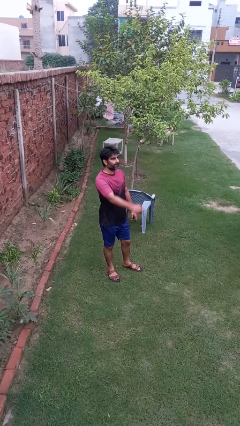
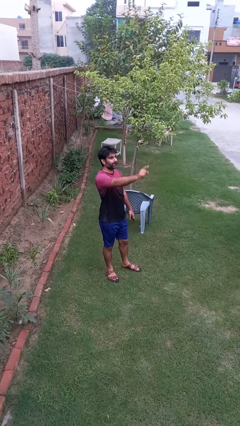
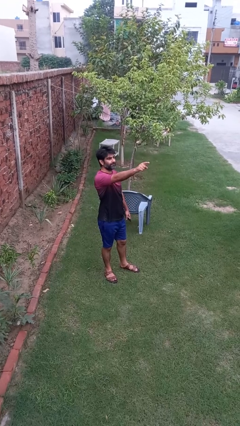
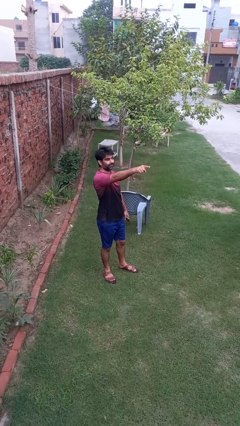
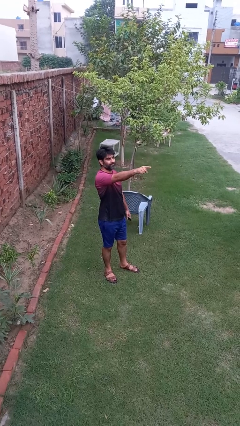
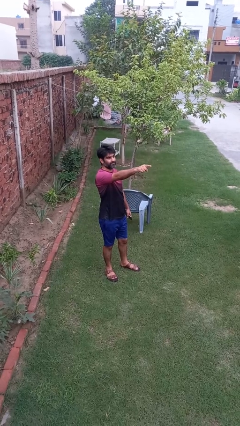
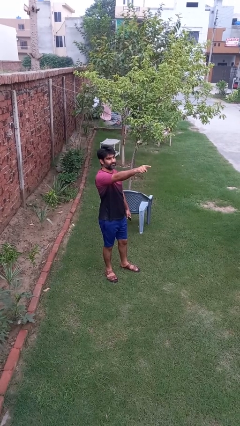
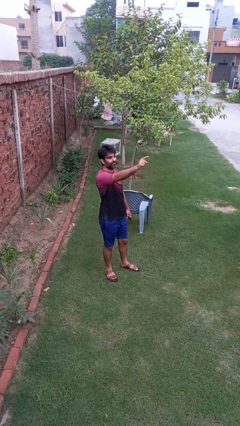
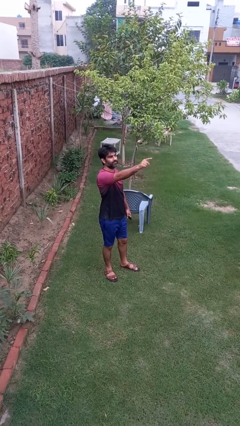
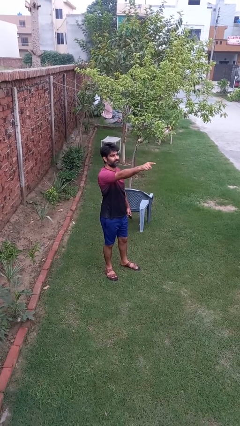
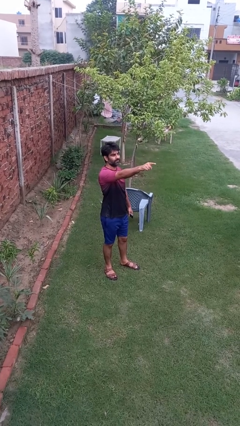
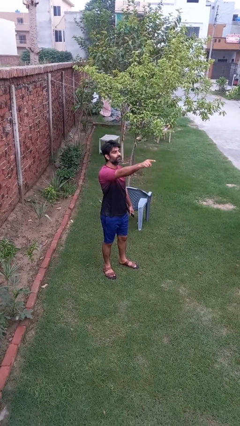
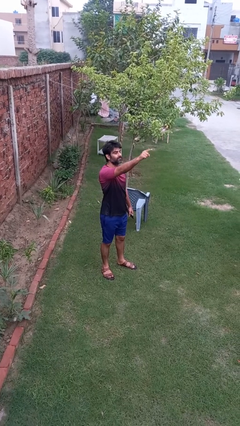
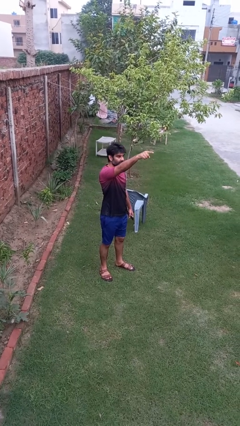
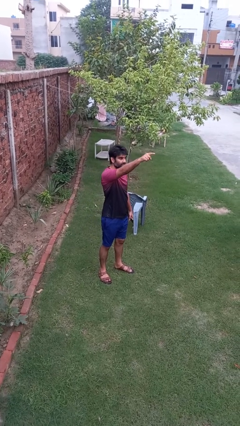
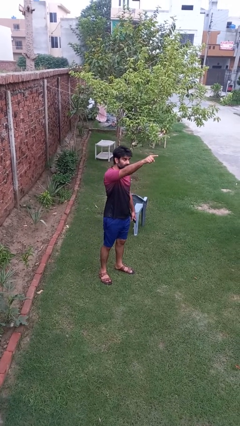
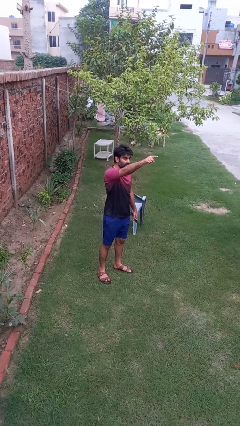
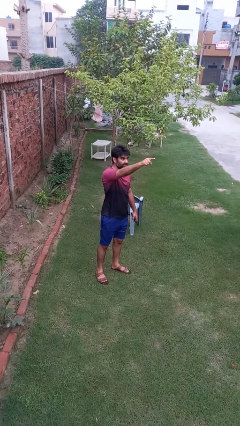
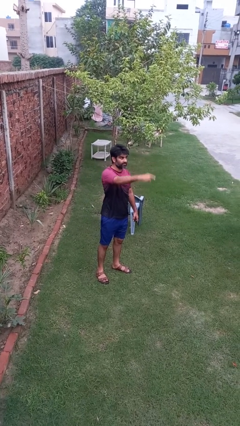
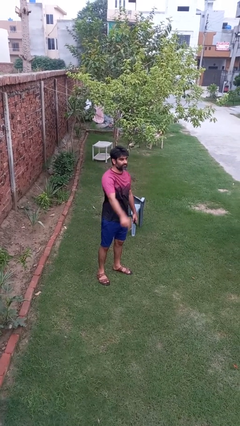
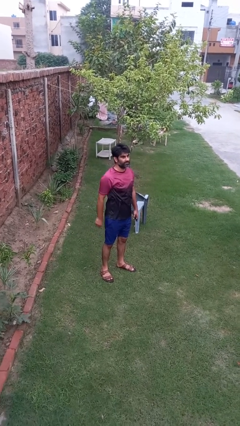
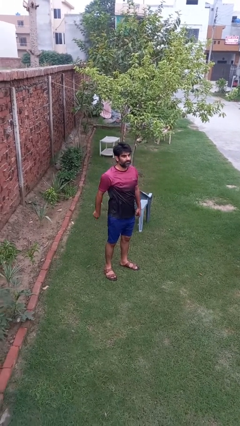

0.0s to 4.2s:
person points at person

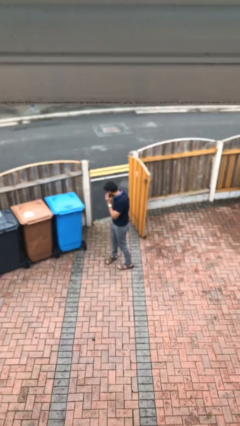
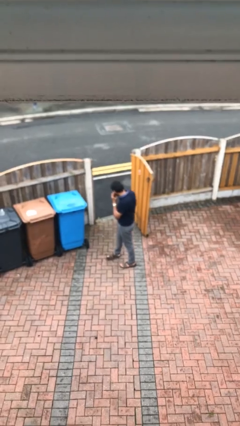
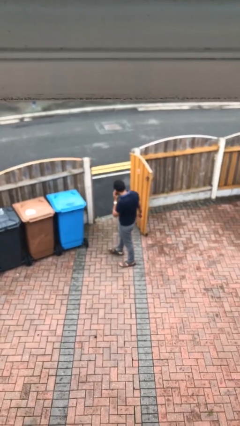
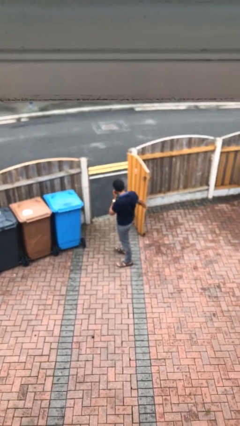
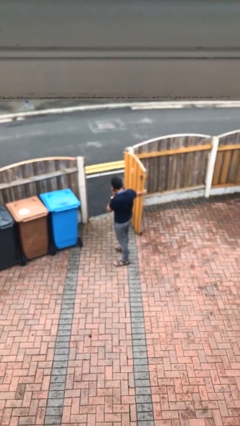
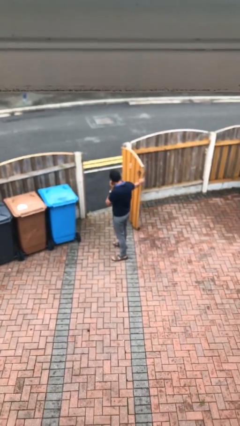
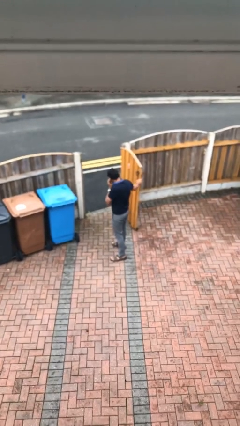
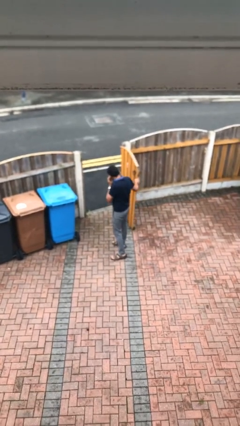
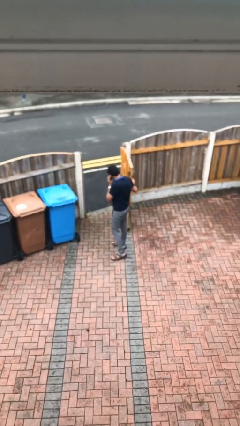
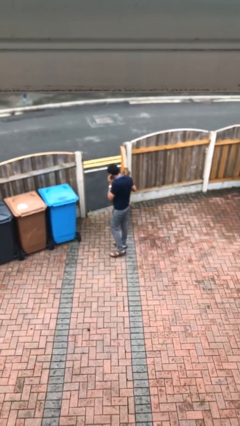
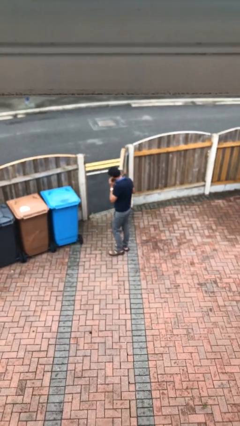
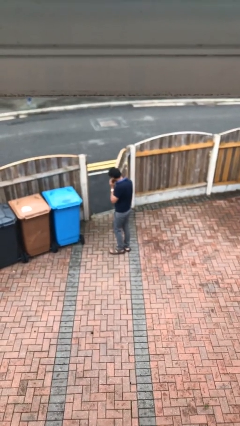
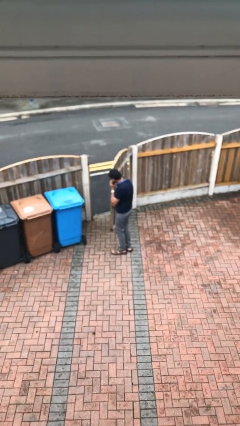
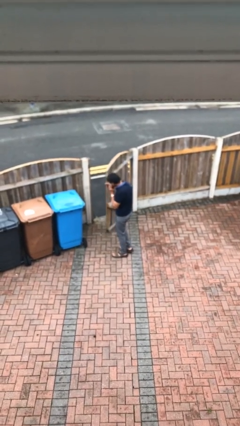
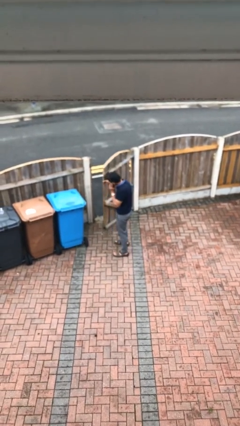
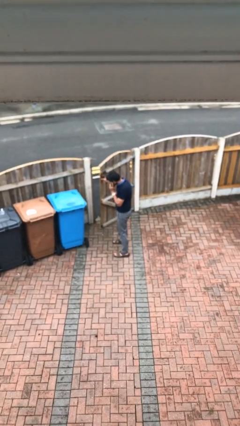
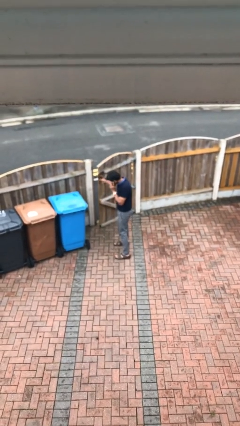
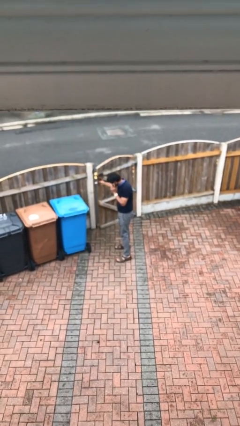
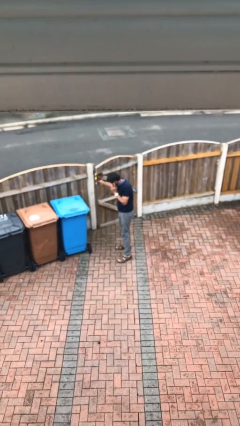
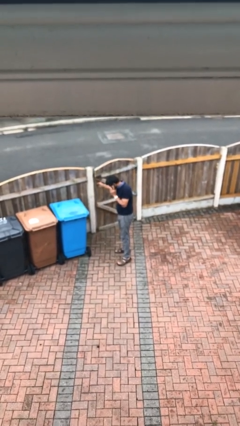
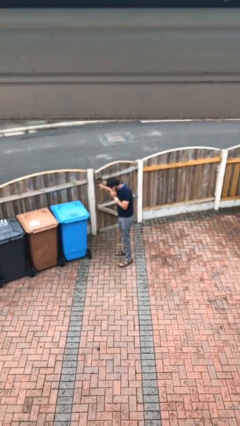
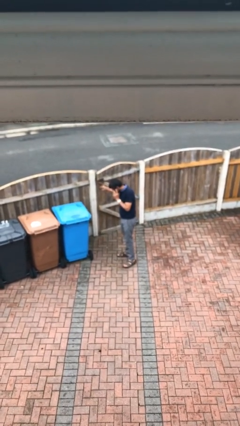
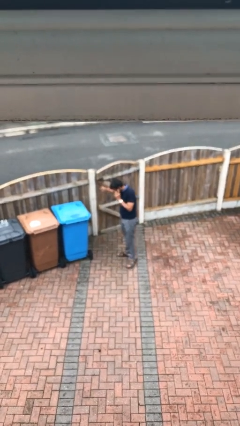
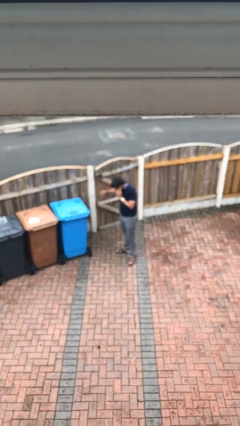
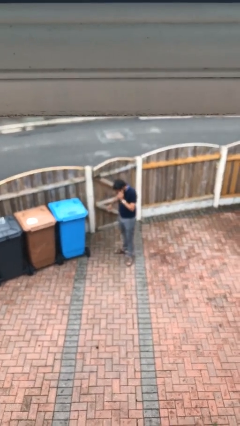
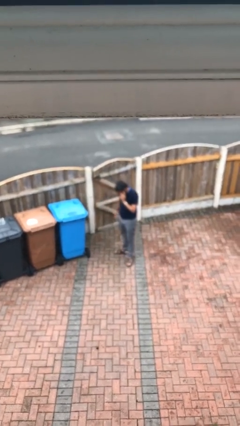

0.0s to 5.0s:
person closes facility door

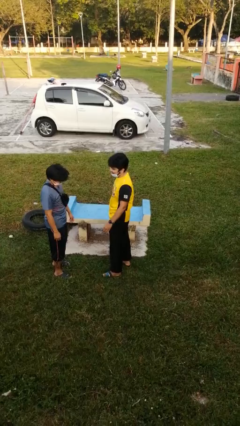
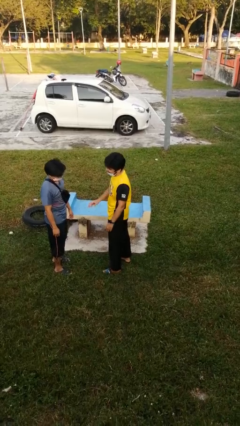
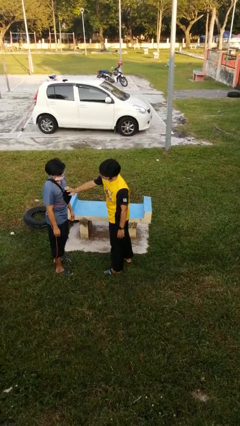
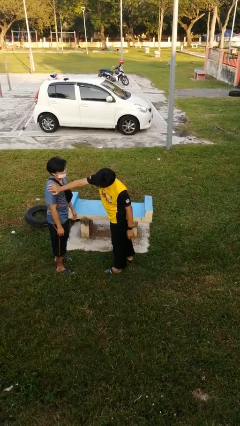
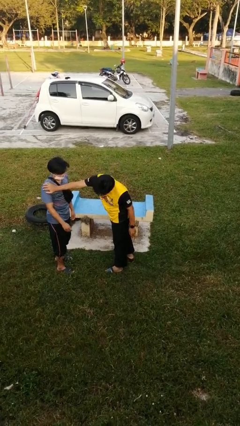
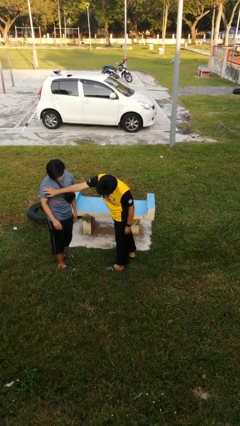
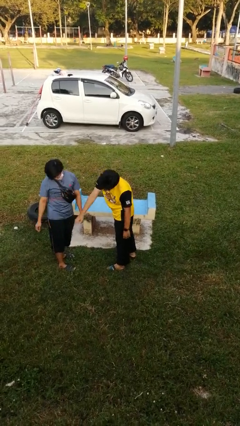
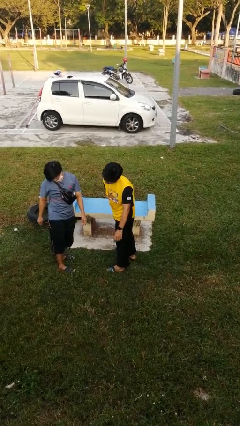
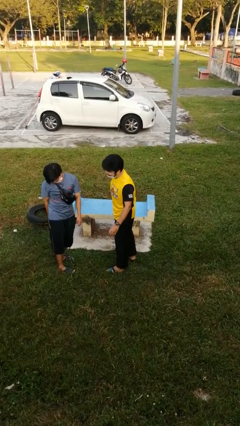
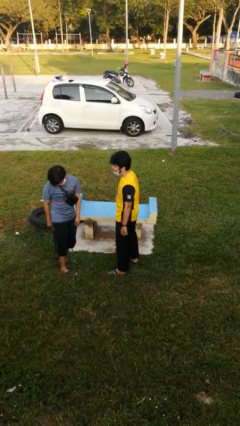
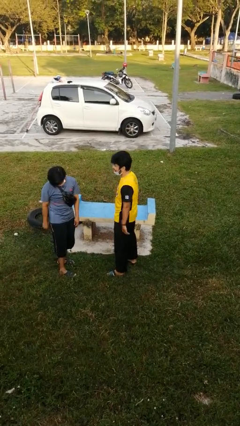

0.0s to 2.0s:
person shoves person

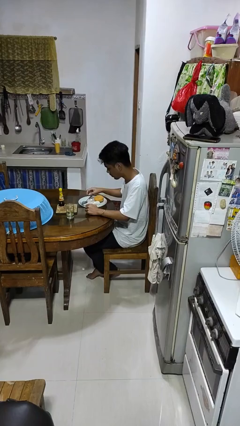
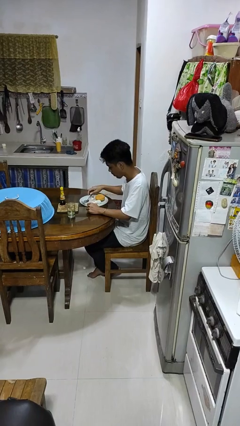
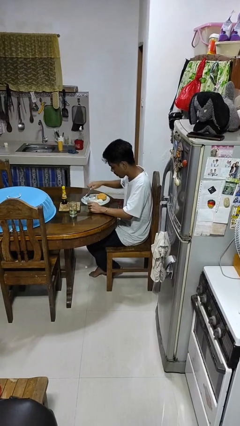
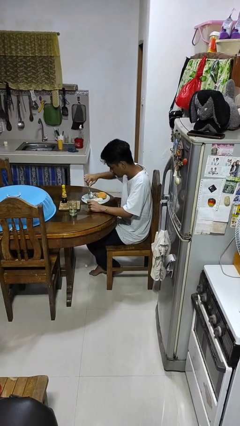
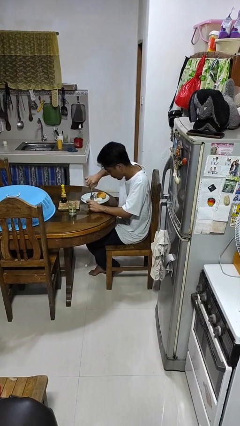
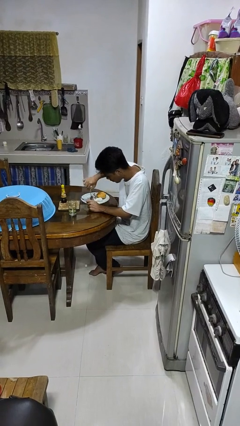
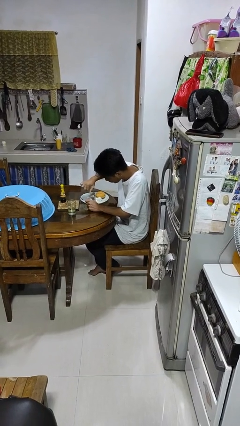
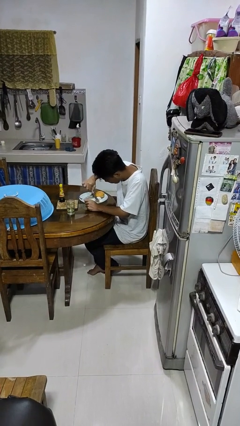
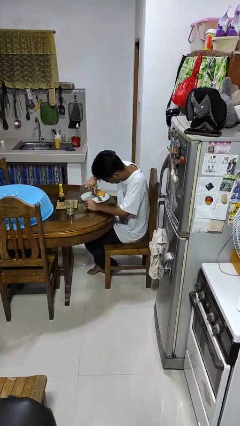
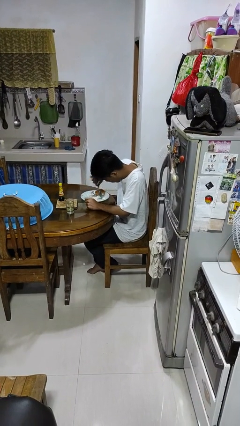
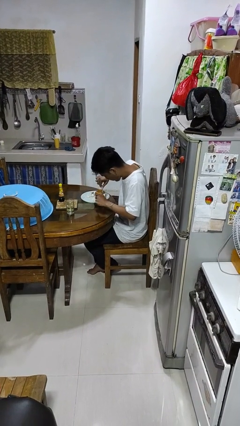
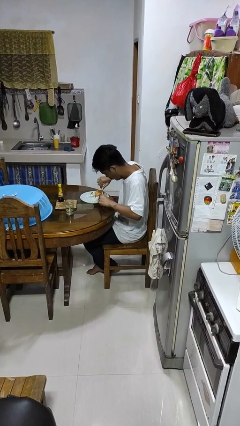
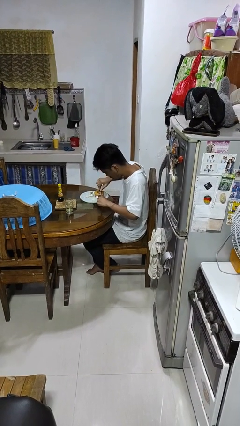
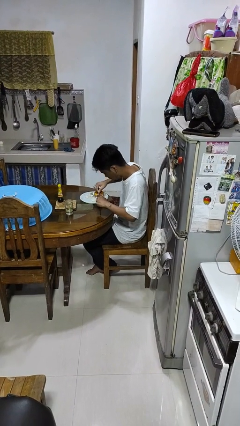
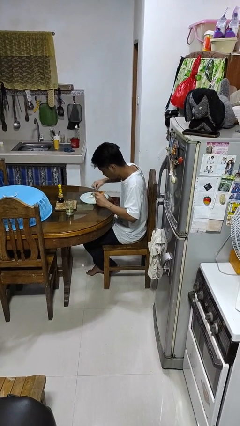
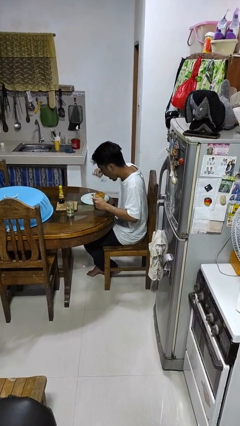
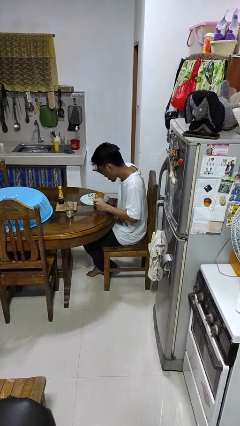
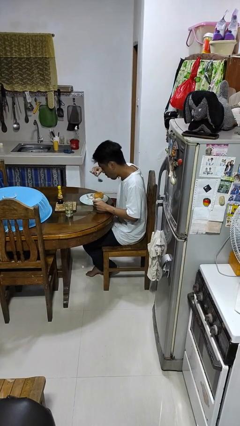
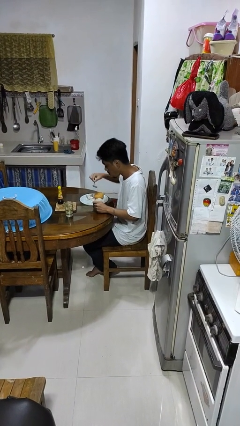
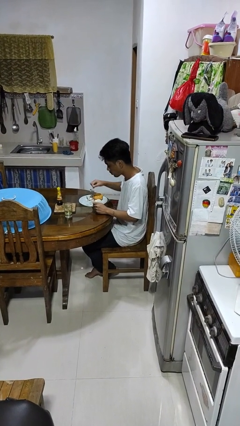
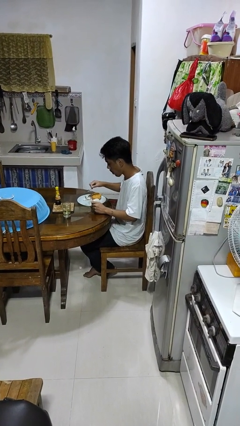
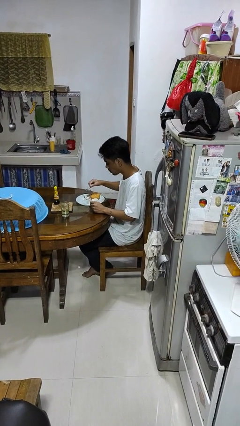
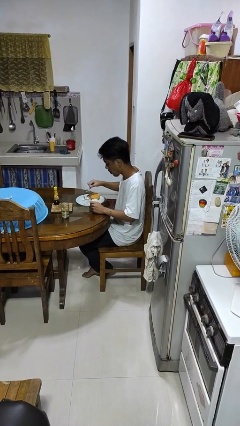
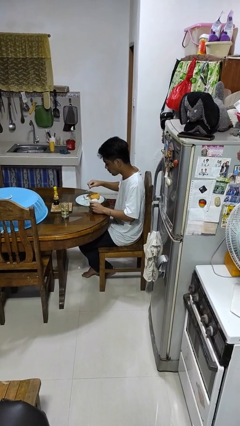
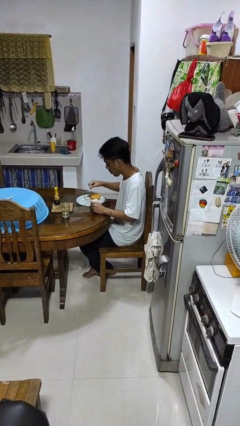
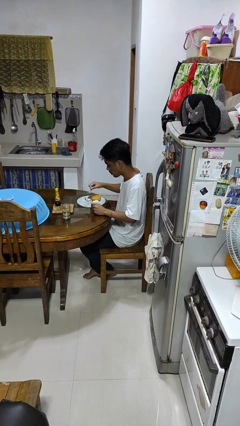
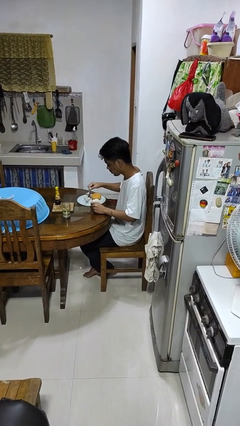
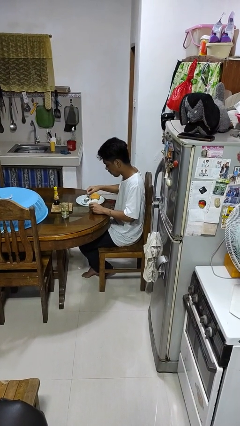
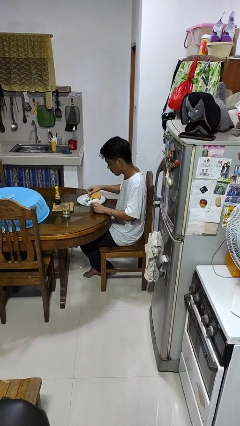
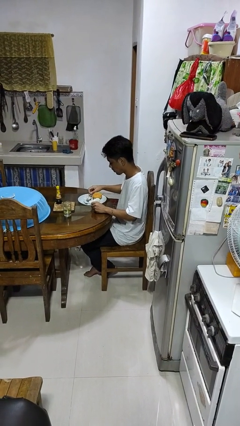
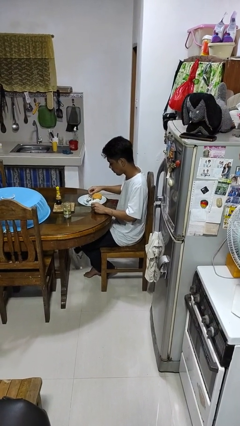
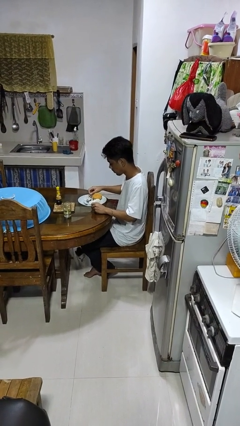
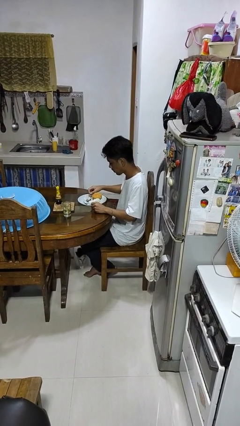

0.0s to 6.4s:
person eats with utensil
